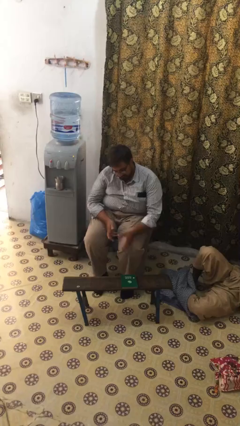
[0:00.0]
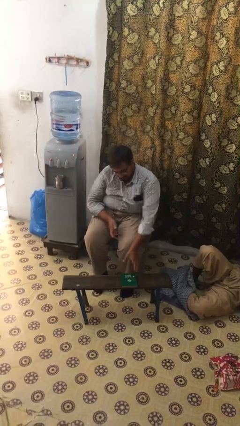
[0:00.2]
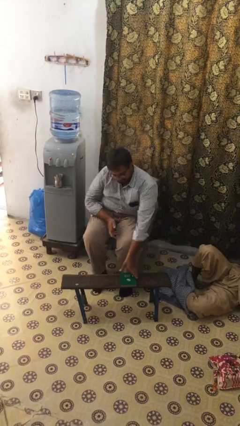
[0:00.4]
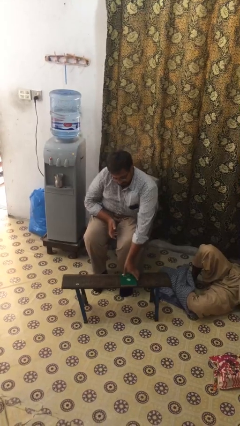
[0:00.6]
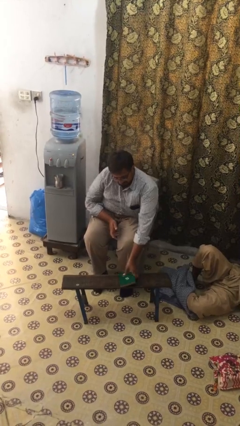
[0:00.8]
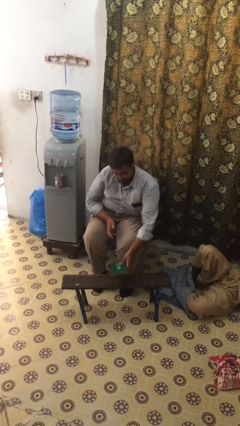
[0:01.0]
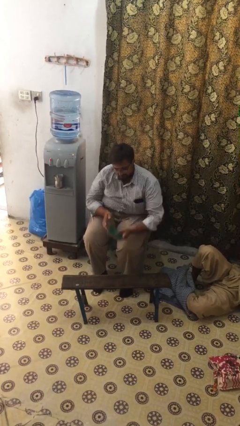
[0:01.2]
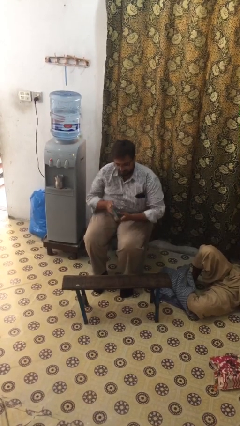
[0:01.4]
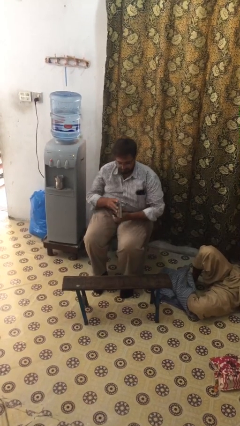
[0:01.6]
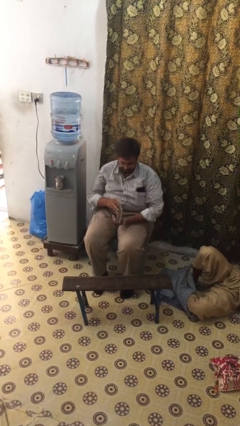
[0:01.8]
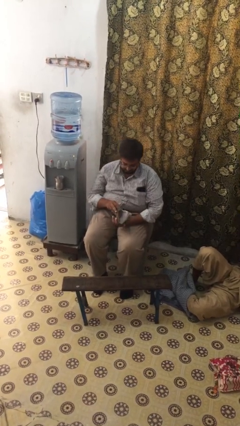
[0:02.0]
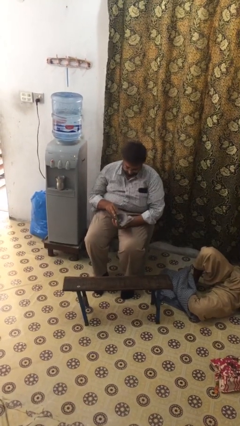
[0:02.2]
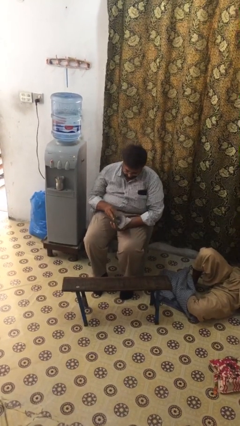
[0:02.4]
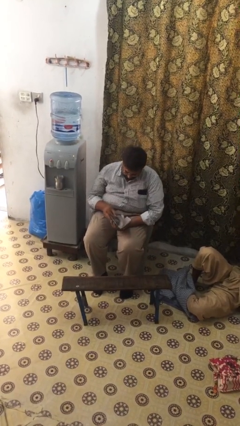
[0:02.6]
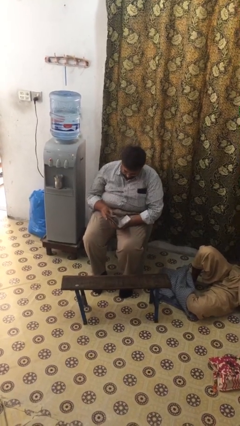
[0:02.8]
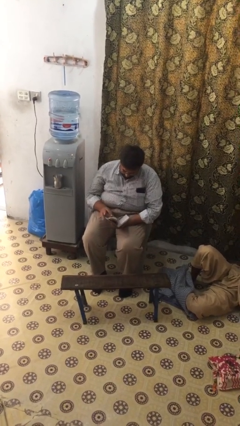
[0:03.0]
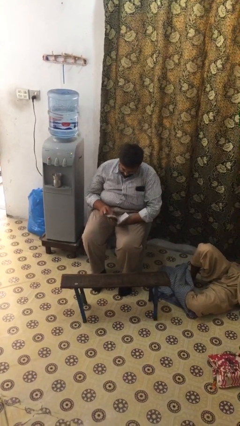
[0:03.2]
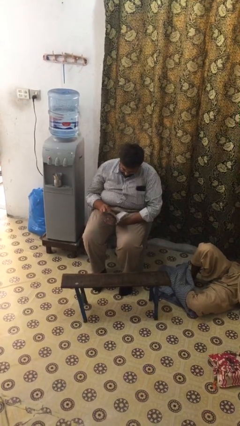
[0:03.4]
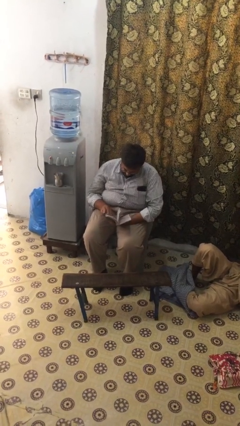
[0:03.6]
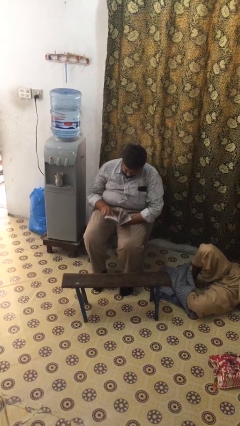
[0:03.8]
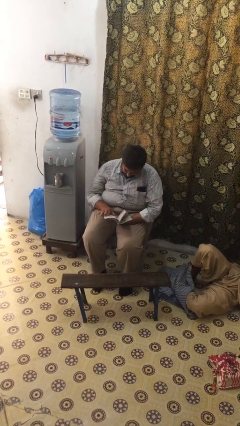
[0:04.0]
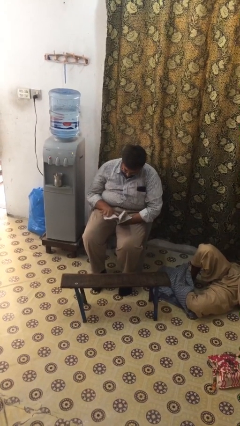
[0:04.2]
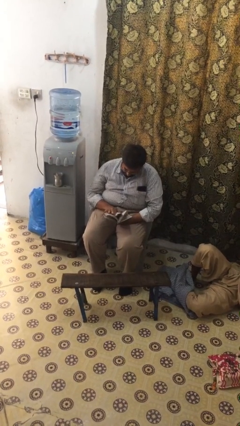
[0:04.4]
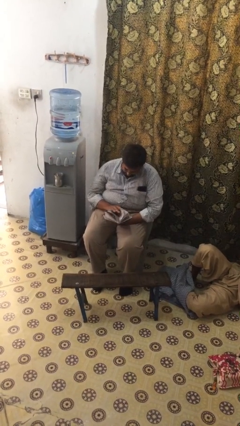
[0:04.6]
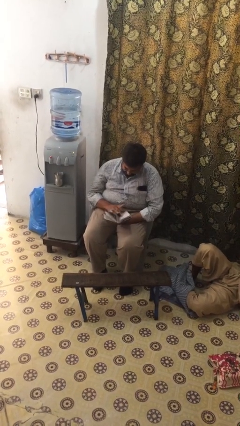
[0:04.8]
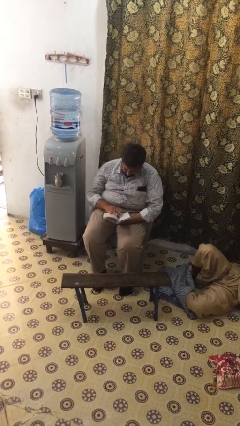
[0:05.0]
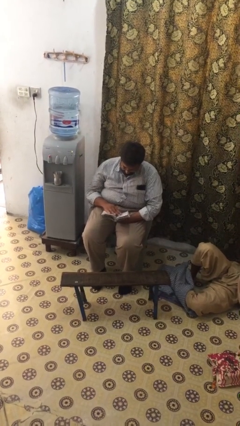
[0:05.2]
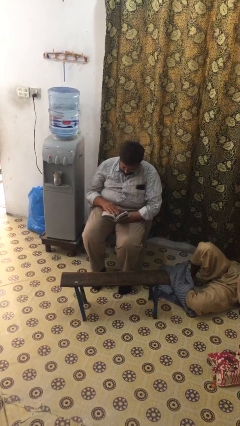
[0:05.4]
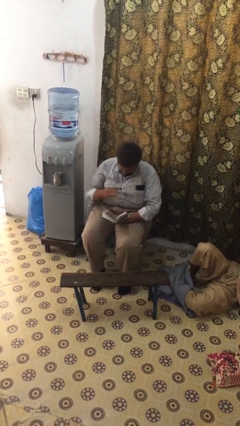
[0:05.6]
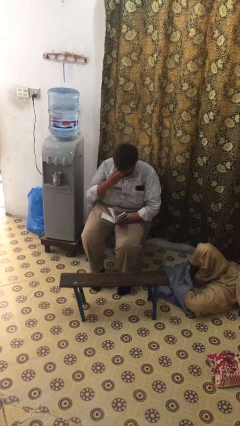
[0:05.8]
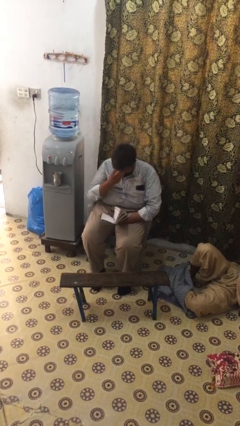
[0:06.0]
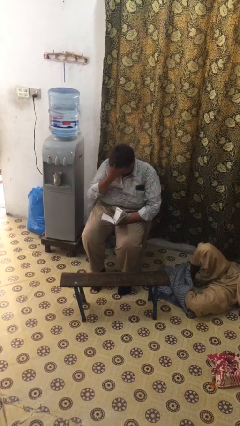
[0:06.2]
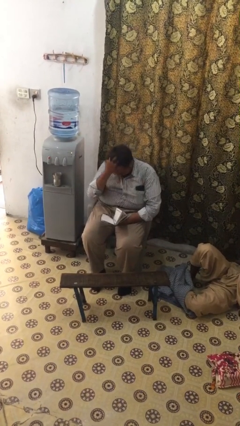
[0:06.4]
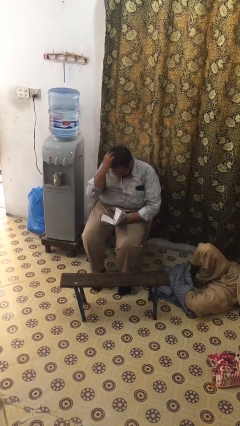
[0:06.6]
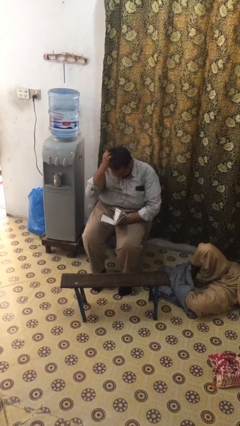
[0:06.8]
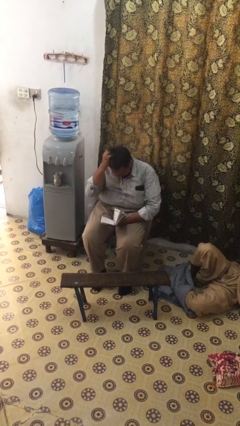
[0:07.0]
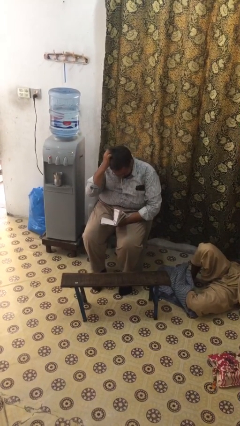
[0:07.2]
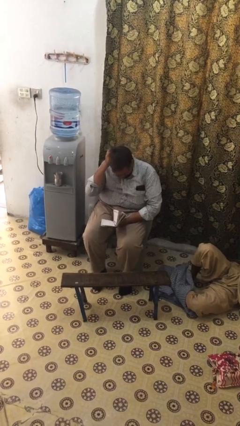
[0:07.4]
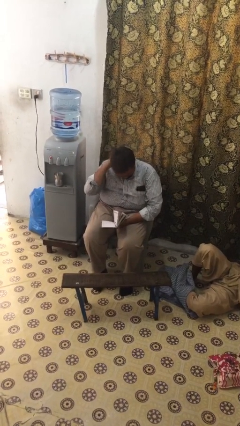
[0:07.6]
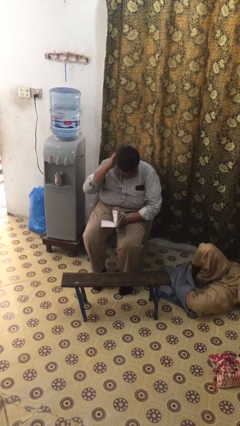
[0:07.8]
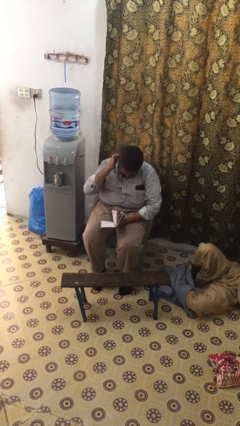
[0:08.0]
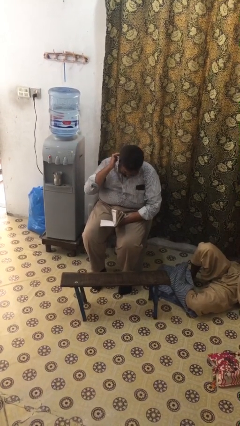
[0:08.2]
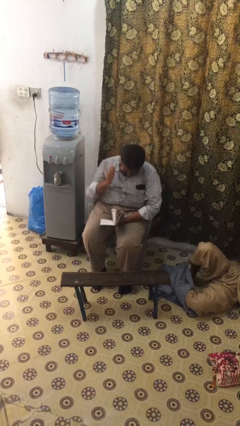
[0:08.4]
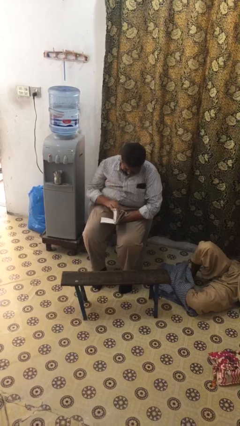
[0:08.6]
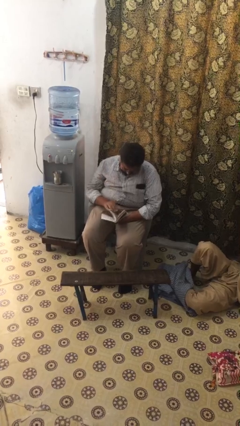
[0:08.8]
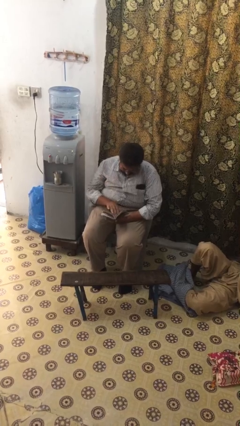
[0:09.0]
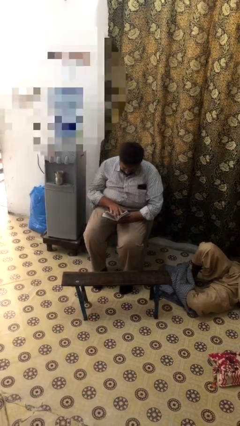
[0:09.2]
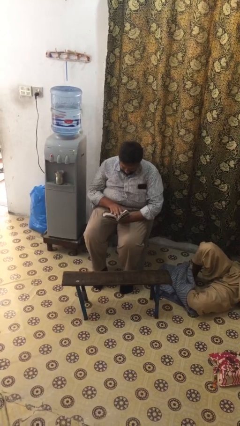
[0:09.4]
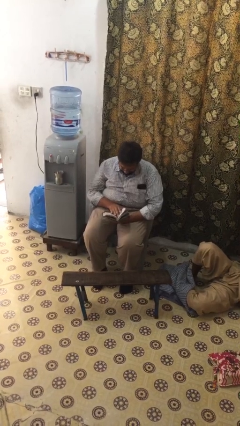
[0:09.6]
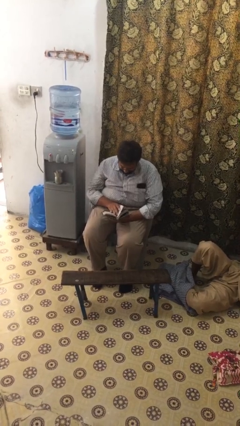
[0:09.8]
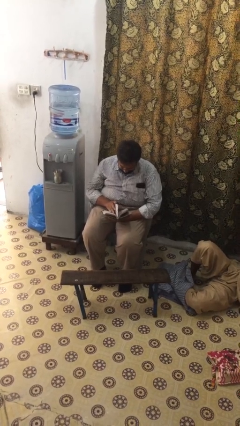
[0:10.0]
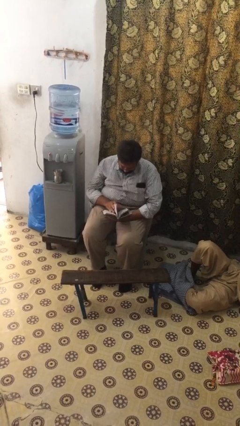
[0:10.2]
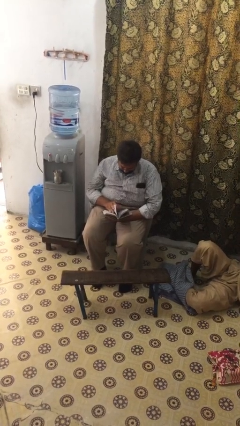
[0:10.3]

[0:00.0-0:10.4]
person reads document

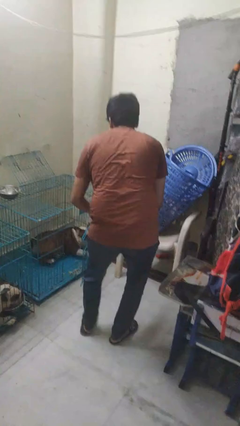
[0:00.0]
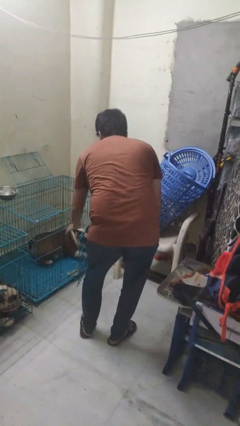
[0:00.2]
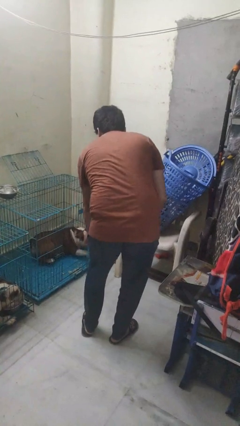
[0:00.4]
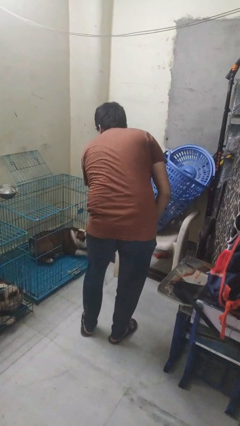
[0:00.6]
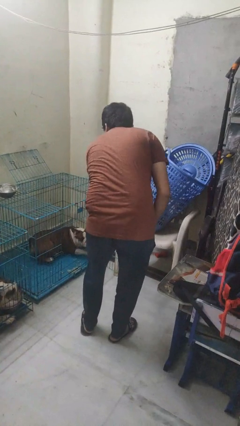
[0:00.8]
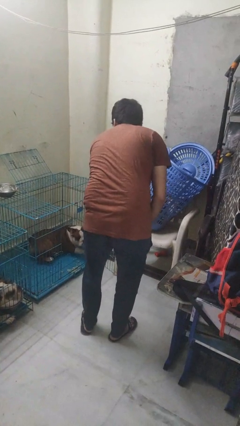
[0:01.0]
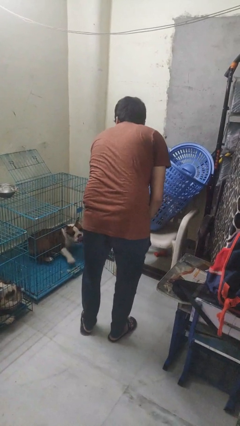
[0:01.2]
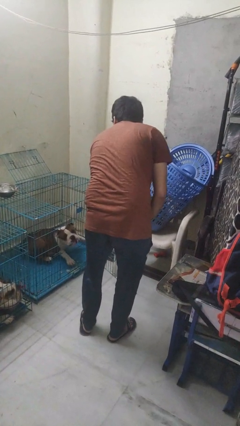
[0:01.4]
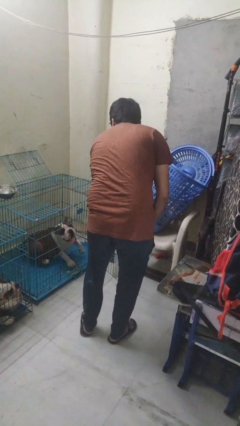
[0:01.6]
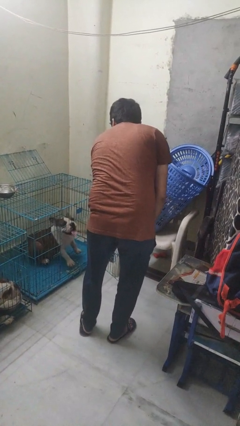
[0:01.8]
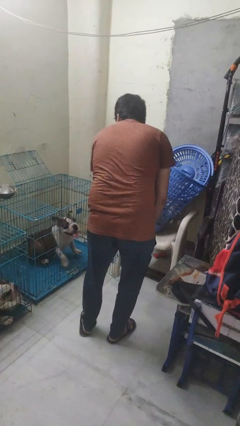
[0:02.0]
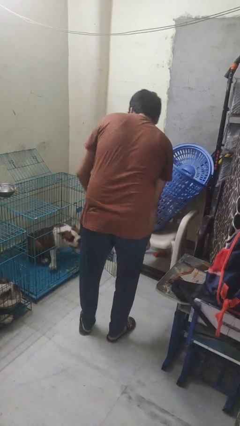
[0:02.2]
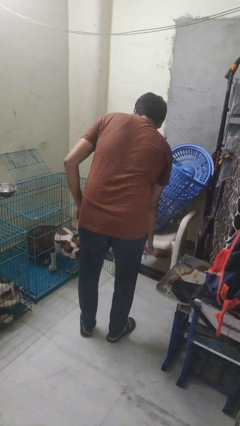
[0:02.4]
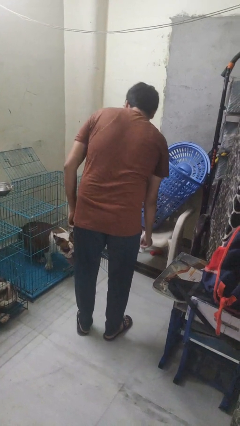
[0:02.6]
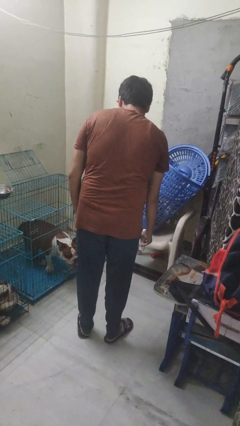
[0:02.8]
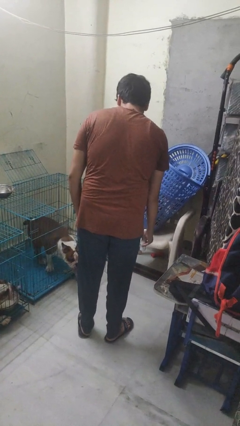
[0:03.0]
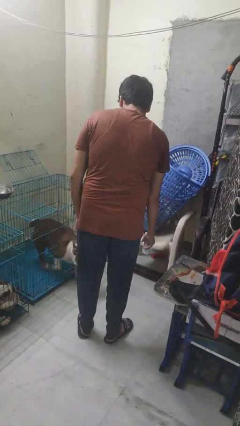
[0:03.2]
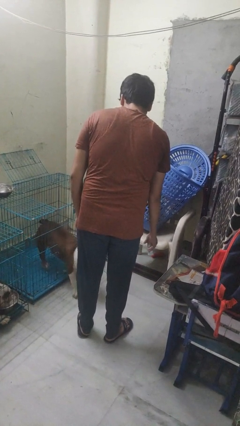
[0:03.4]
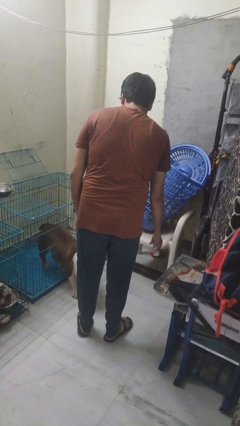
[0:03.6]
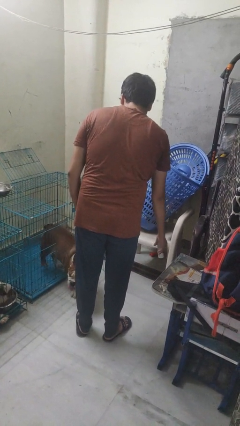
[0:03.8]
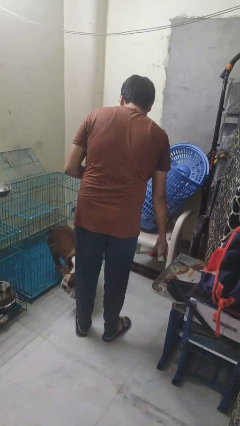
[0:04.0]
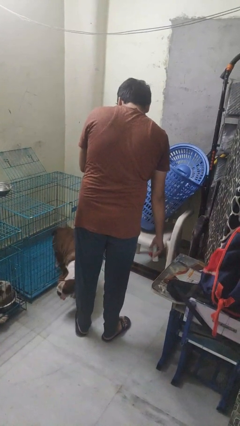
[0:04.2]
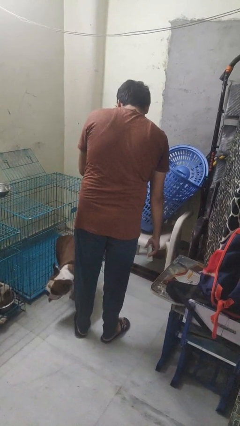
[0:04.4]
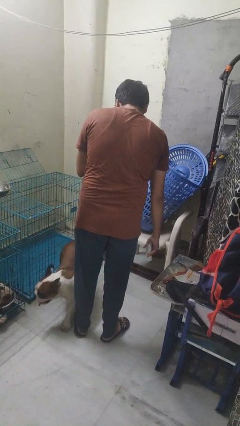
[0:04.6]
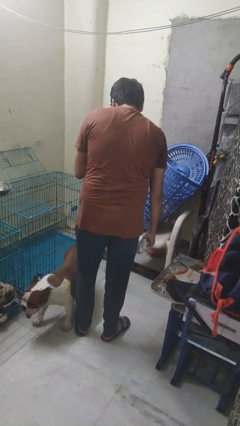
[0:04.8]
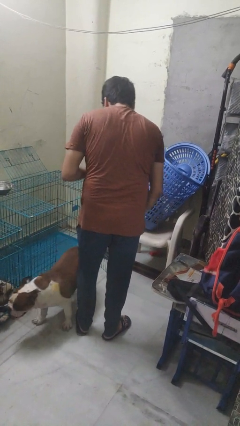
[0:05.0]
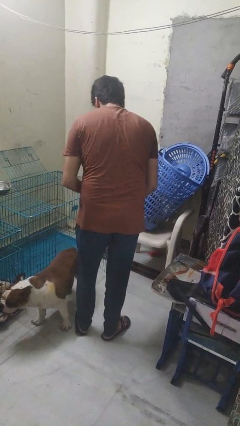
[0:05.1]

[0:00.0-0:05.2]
person uncrates dog

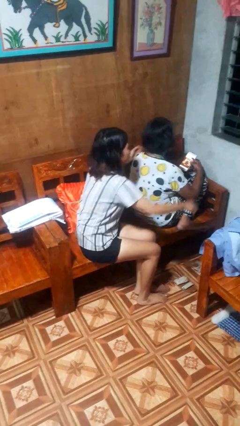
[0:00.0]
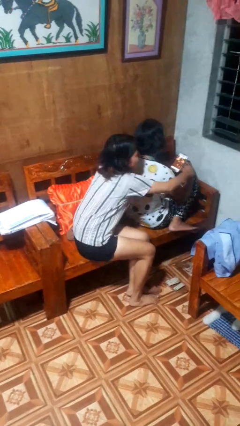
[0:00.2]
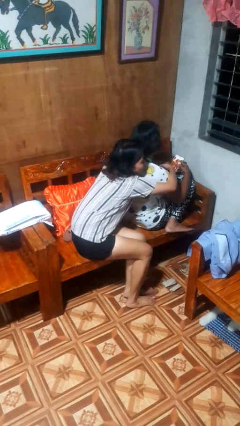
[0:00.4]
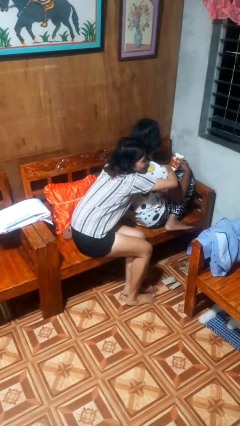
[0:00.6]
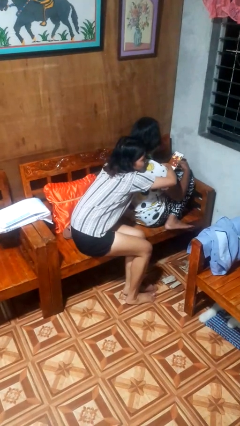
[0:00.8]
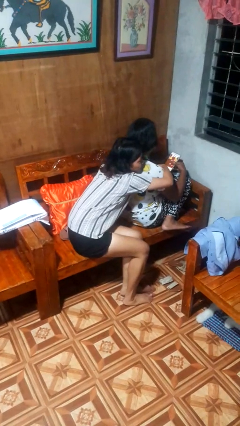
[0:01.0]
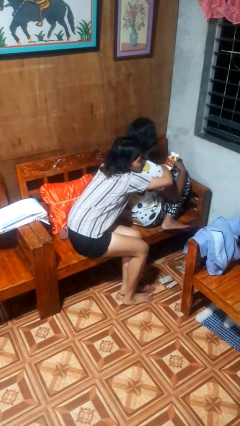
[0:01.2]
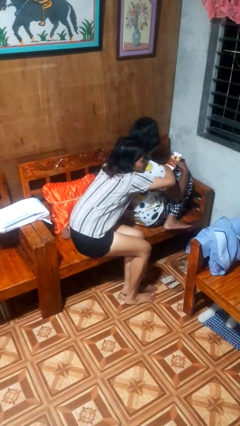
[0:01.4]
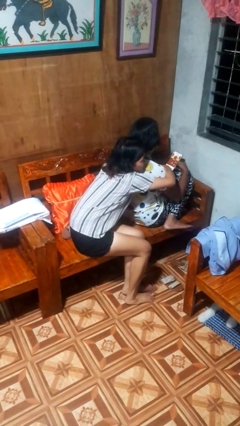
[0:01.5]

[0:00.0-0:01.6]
person hugs person from behind

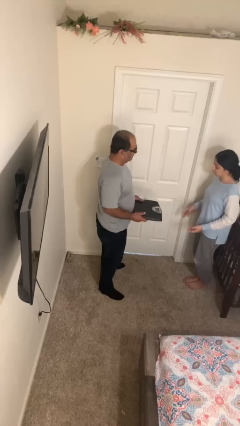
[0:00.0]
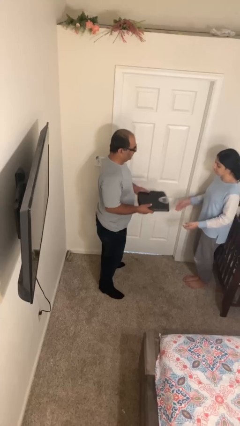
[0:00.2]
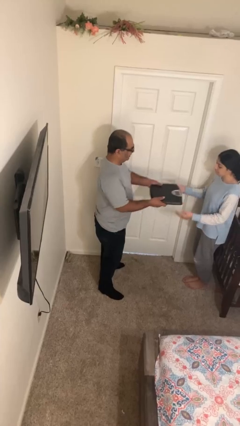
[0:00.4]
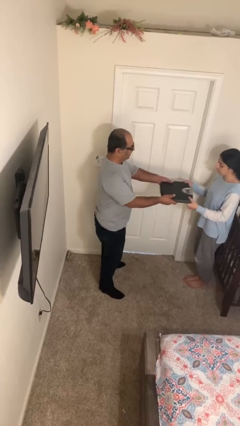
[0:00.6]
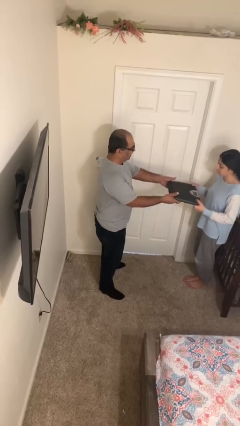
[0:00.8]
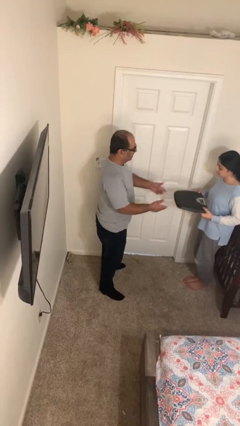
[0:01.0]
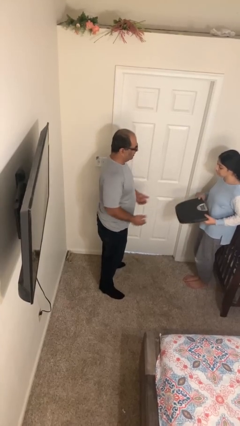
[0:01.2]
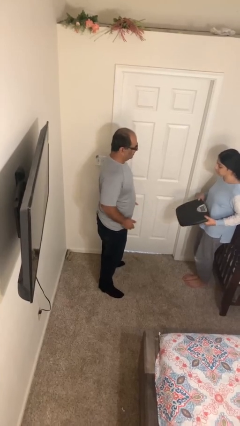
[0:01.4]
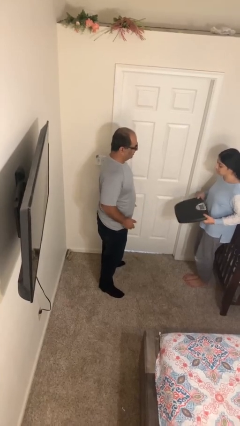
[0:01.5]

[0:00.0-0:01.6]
person transfers object to person
